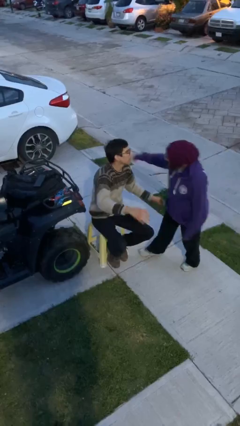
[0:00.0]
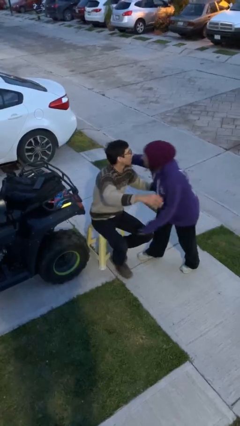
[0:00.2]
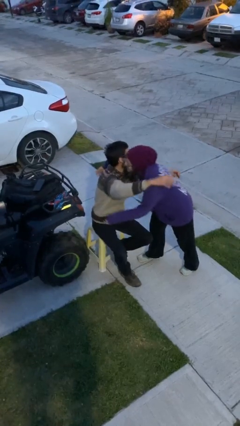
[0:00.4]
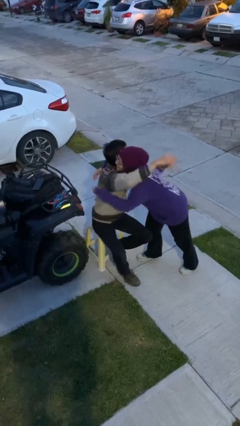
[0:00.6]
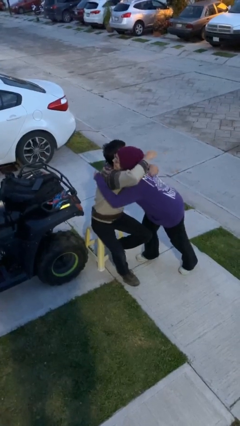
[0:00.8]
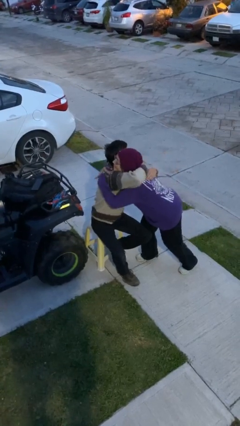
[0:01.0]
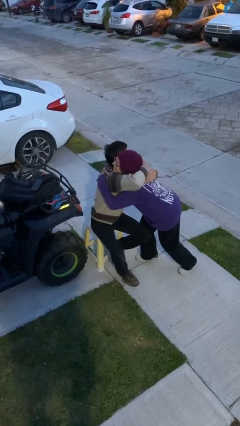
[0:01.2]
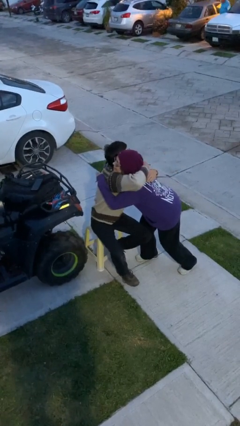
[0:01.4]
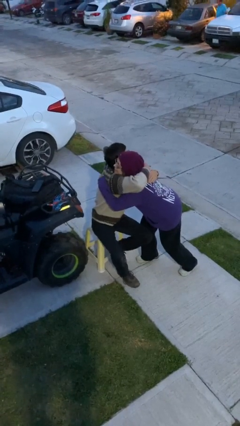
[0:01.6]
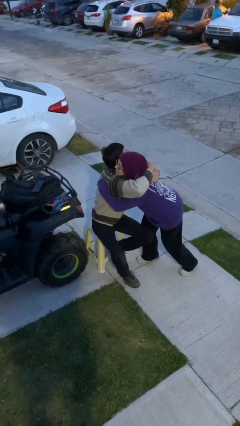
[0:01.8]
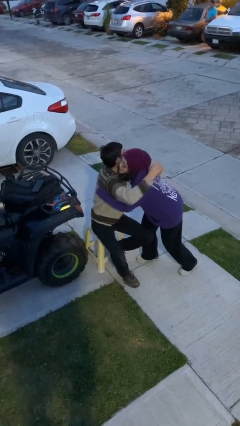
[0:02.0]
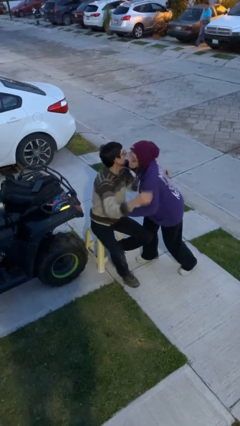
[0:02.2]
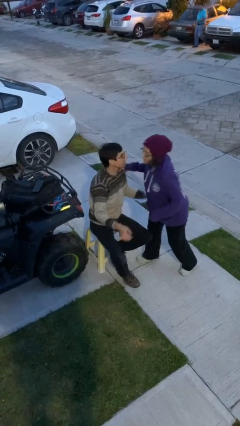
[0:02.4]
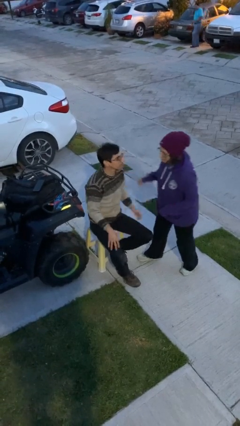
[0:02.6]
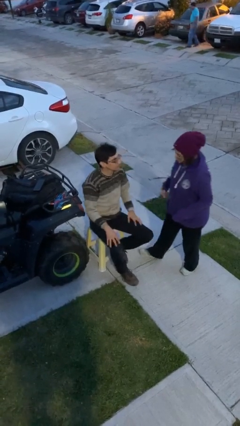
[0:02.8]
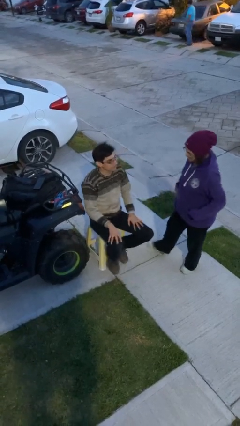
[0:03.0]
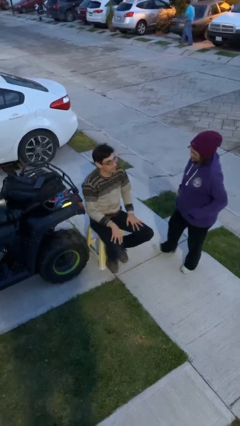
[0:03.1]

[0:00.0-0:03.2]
person embraces person

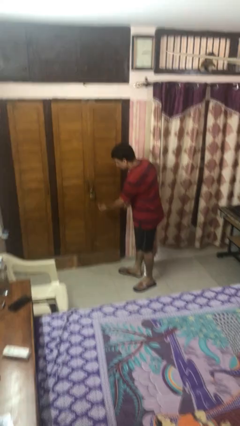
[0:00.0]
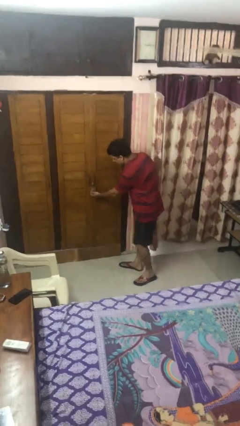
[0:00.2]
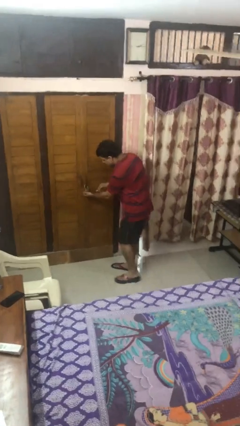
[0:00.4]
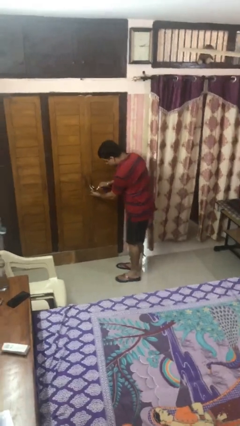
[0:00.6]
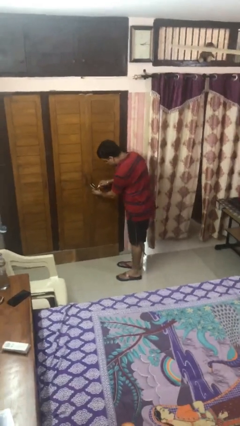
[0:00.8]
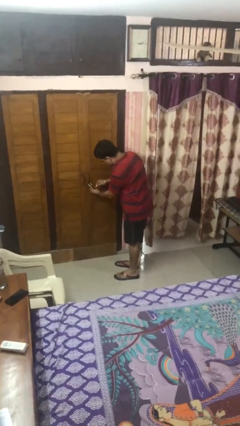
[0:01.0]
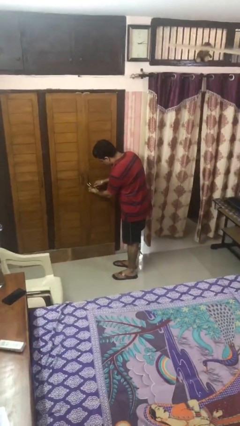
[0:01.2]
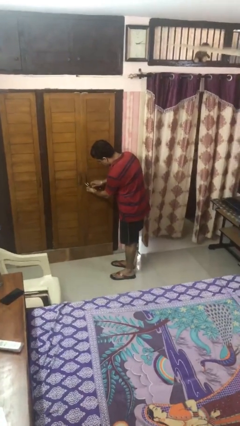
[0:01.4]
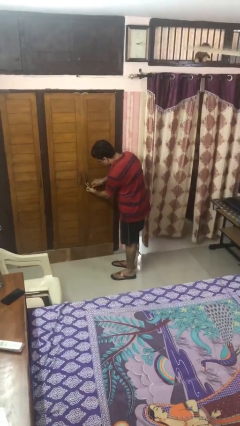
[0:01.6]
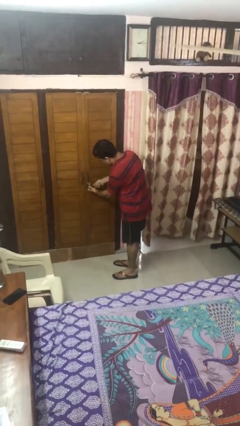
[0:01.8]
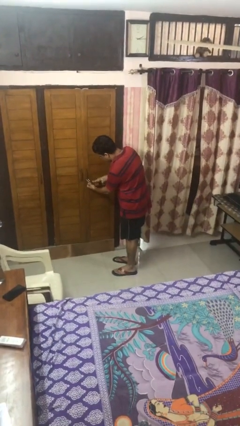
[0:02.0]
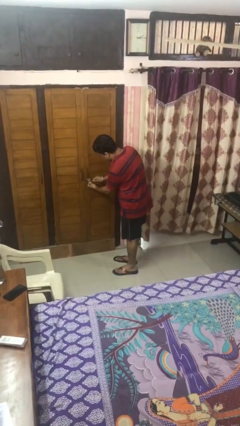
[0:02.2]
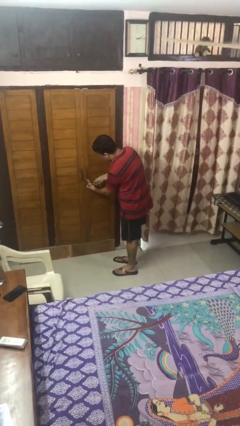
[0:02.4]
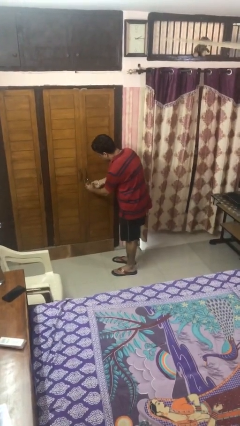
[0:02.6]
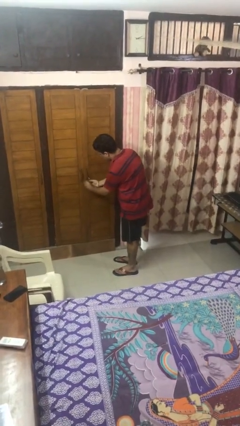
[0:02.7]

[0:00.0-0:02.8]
person unlocks door with keys

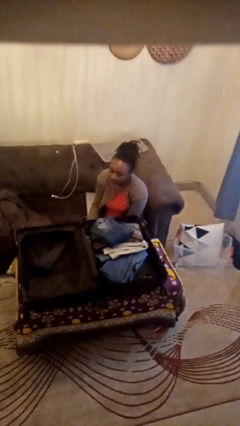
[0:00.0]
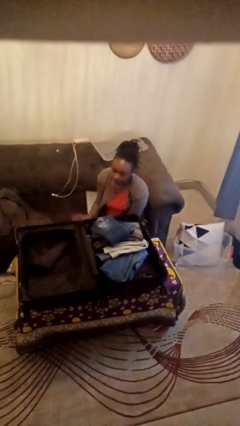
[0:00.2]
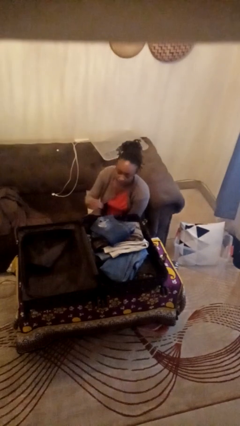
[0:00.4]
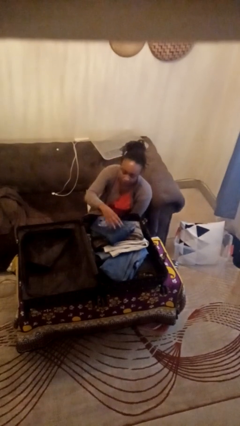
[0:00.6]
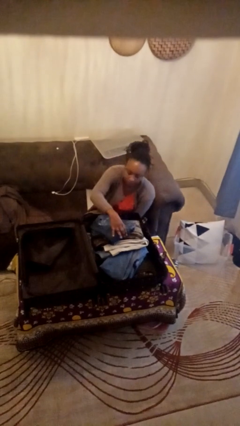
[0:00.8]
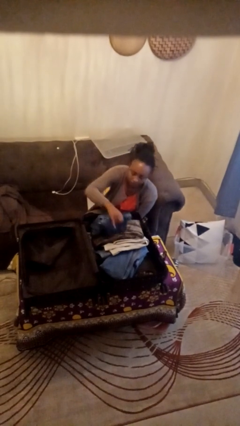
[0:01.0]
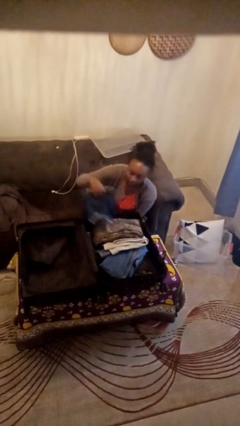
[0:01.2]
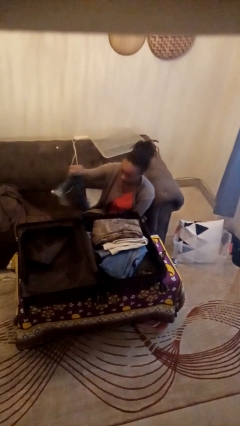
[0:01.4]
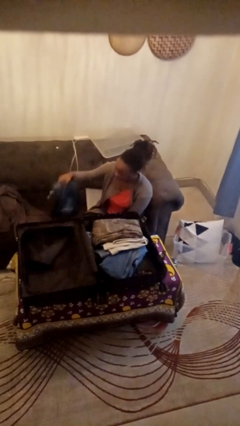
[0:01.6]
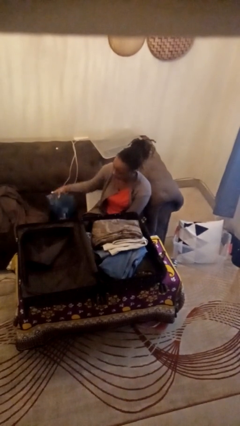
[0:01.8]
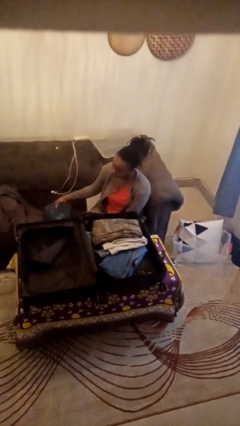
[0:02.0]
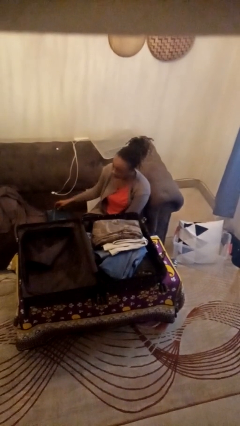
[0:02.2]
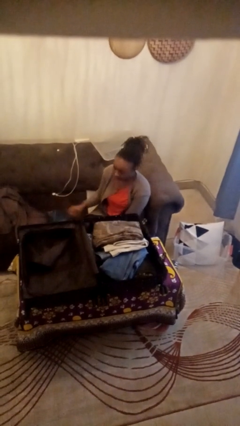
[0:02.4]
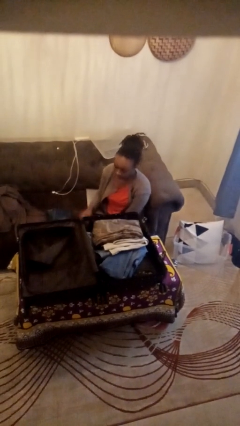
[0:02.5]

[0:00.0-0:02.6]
person unloads clothes from suitcase

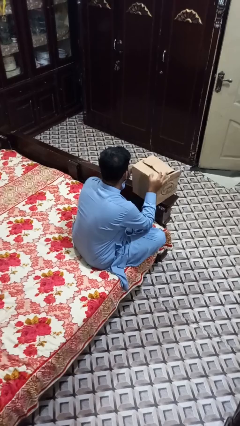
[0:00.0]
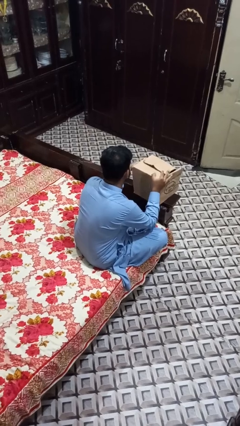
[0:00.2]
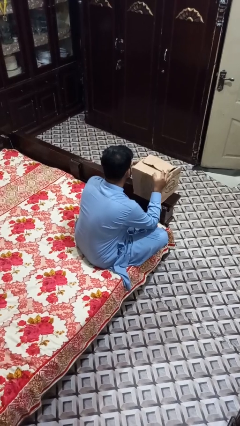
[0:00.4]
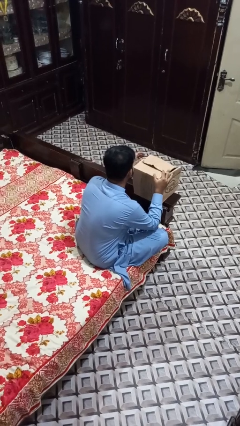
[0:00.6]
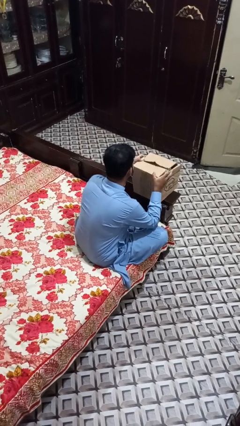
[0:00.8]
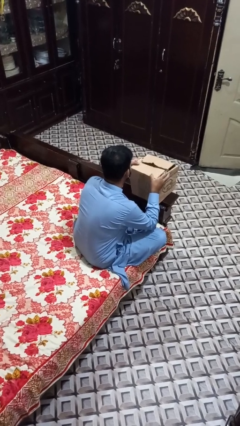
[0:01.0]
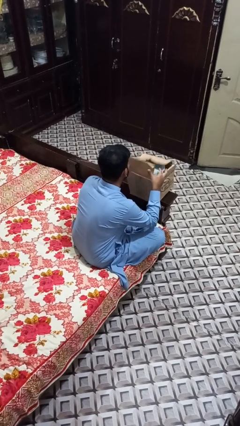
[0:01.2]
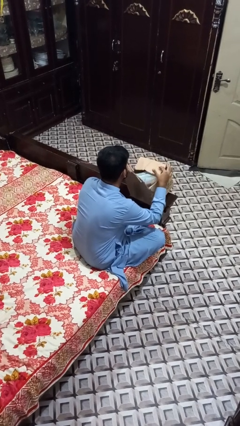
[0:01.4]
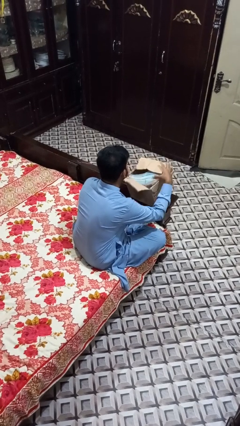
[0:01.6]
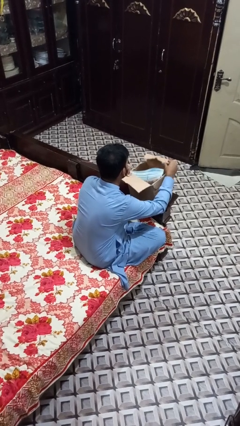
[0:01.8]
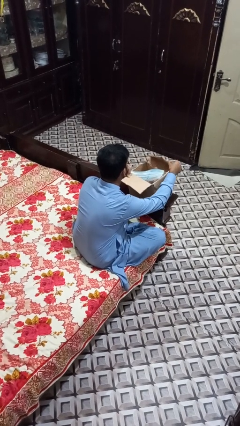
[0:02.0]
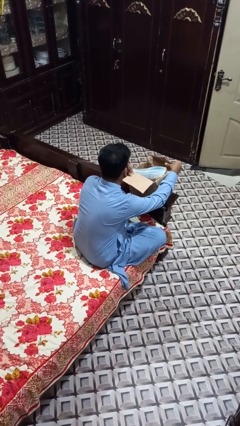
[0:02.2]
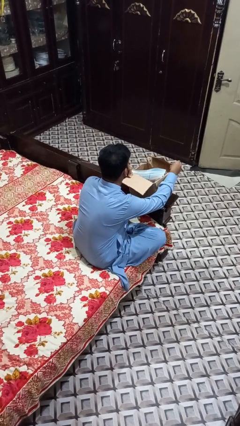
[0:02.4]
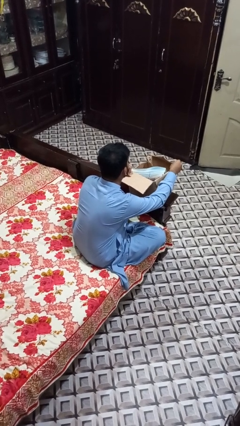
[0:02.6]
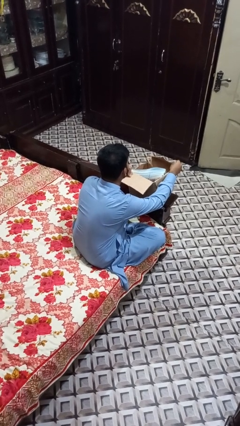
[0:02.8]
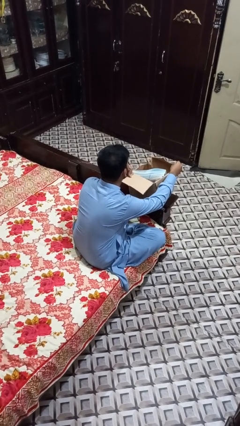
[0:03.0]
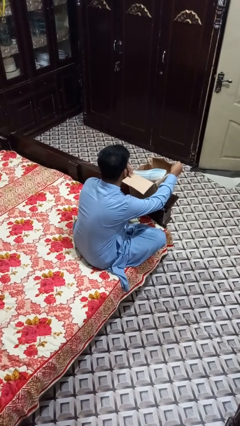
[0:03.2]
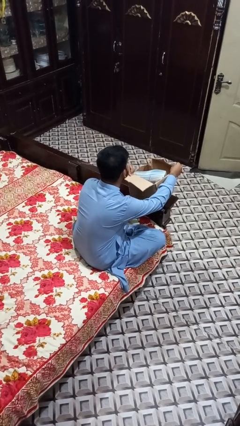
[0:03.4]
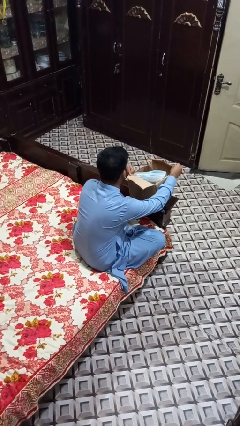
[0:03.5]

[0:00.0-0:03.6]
person opens box

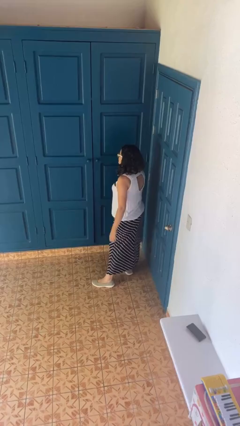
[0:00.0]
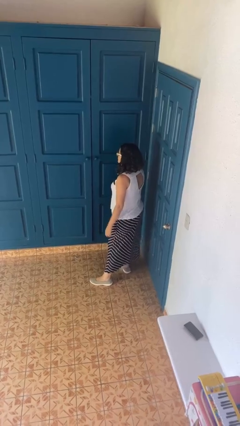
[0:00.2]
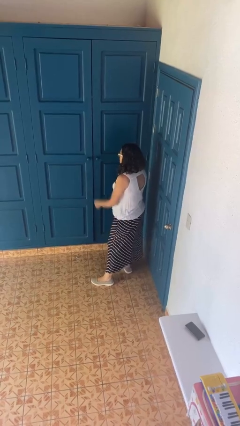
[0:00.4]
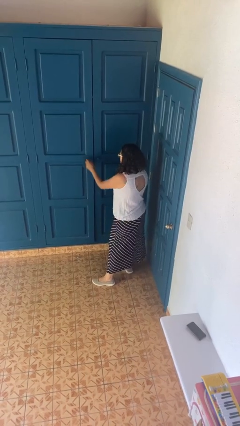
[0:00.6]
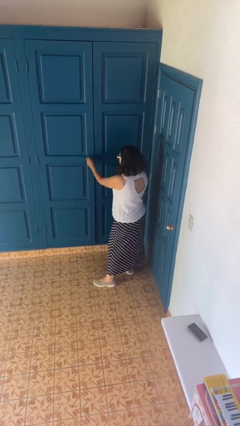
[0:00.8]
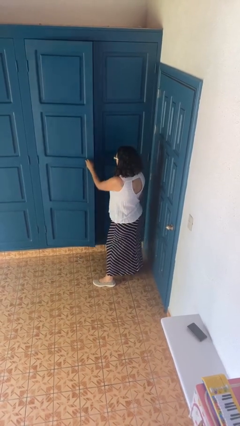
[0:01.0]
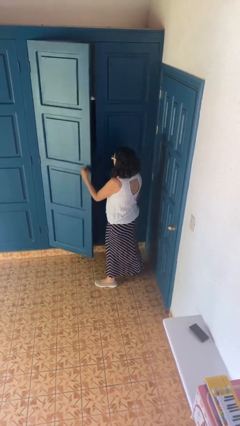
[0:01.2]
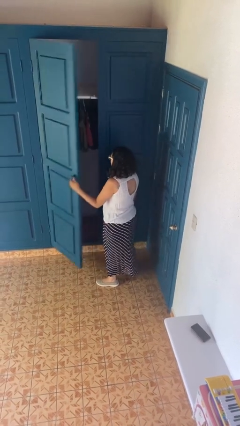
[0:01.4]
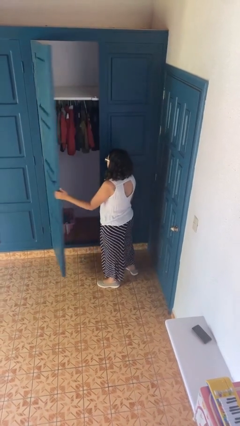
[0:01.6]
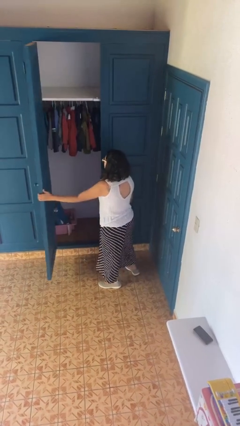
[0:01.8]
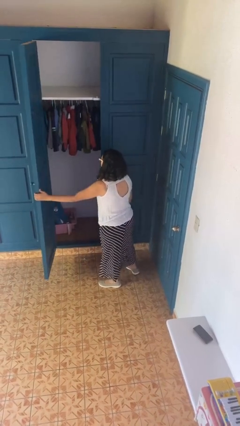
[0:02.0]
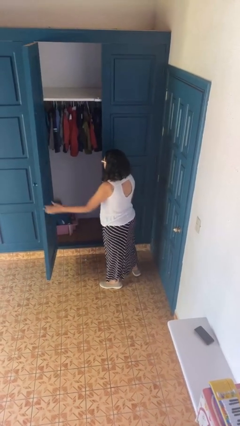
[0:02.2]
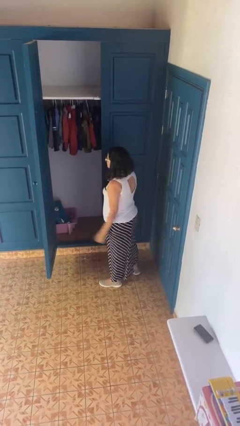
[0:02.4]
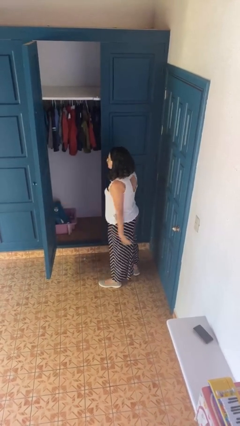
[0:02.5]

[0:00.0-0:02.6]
person opens closet door

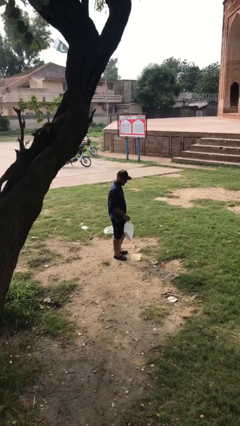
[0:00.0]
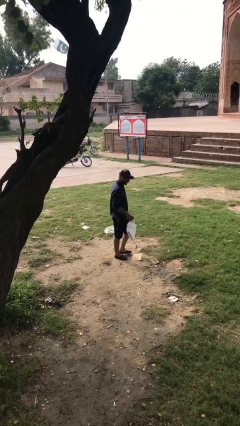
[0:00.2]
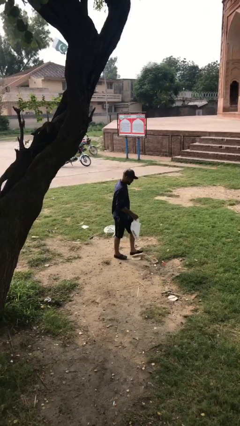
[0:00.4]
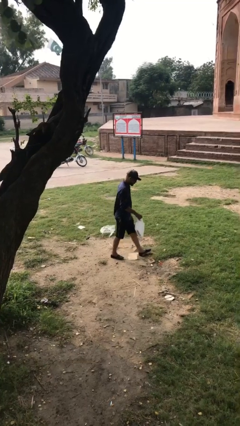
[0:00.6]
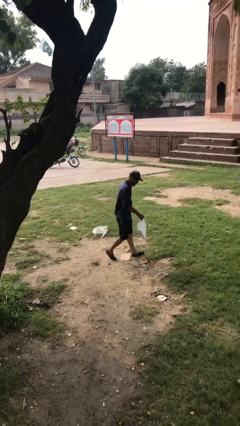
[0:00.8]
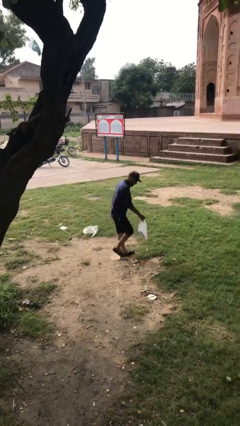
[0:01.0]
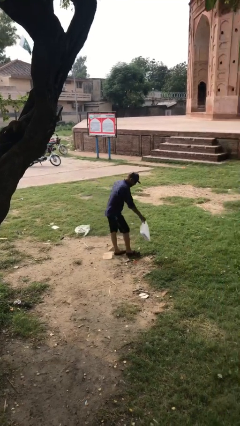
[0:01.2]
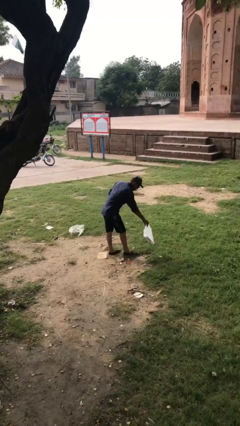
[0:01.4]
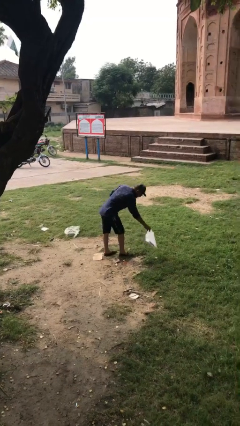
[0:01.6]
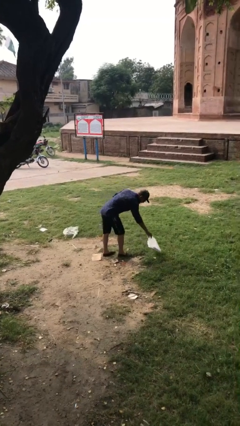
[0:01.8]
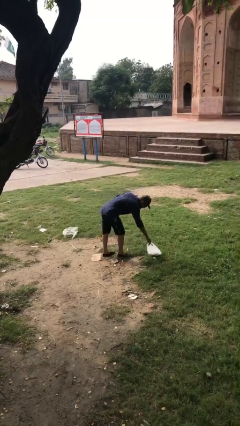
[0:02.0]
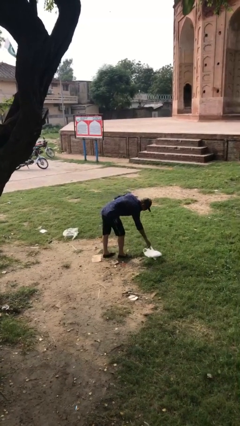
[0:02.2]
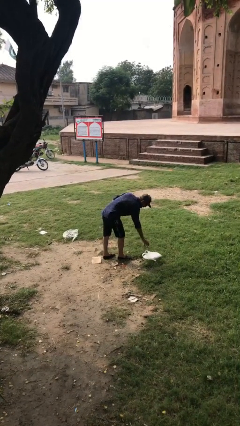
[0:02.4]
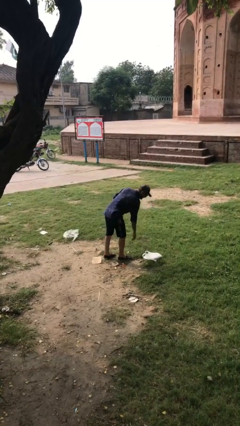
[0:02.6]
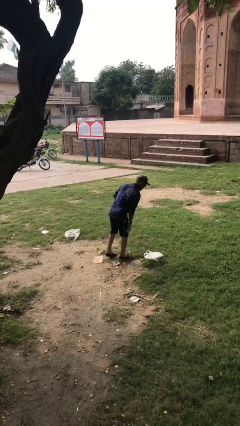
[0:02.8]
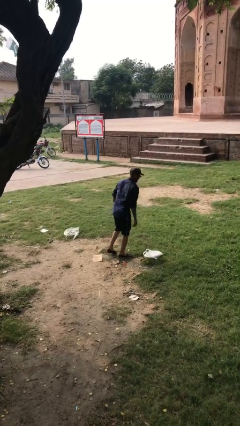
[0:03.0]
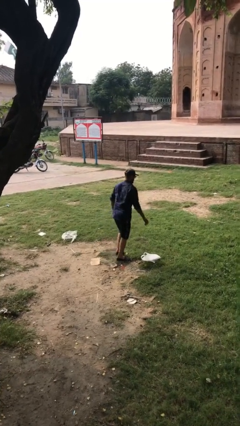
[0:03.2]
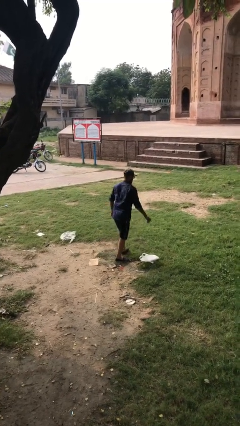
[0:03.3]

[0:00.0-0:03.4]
person puts down object on floor
